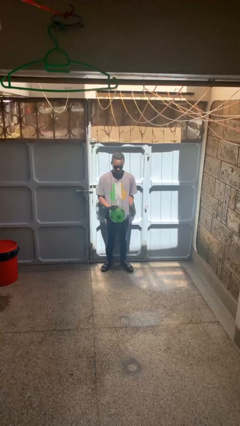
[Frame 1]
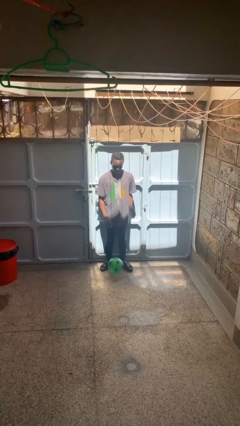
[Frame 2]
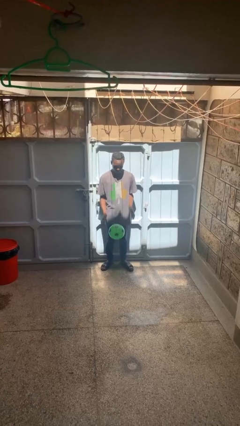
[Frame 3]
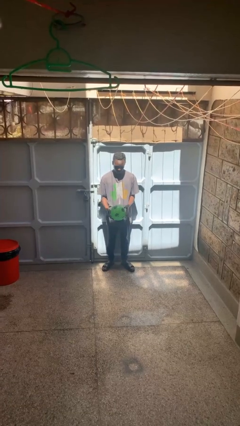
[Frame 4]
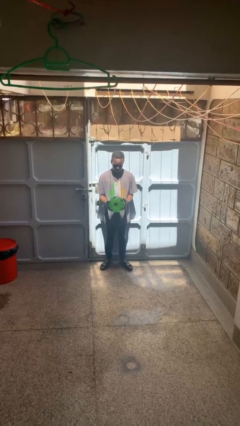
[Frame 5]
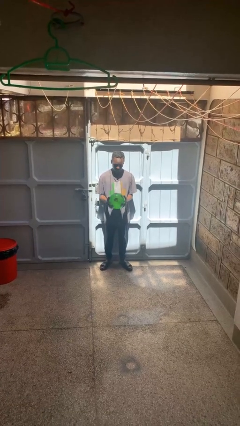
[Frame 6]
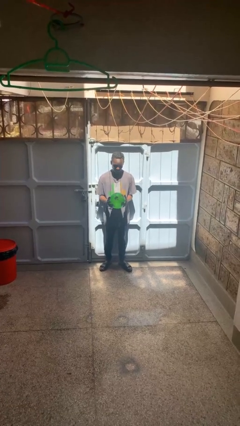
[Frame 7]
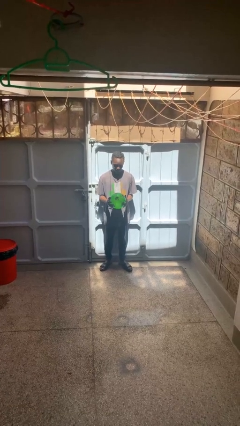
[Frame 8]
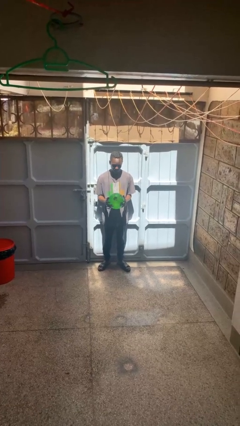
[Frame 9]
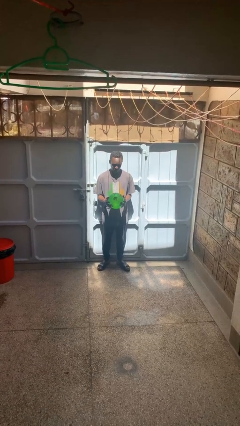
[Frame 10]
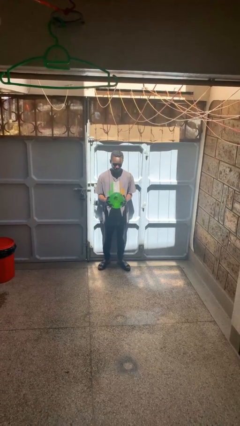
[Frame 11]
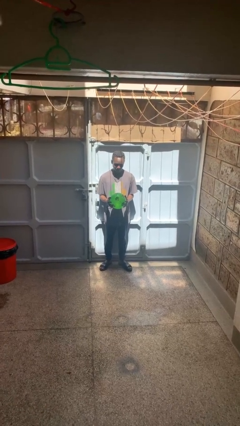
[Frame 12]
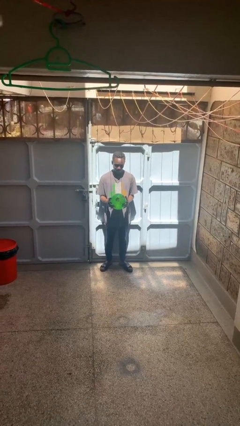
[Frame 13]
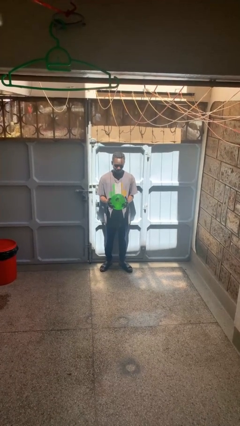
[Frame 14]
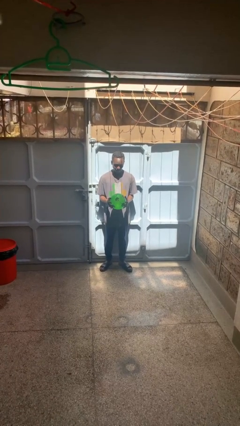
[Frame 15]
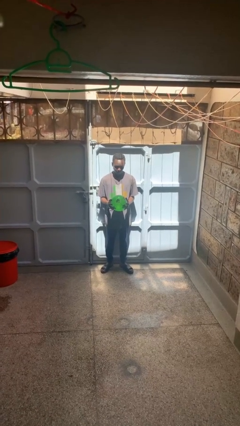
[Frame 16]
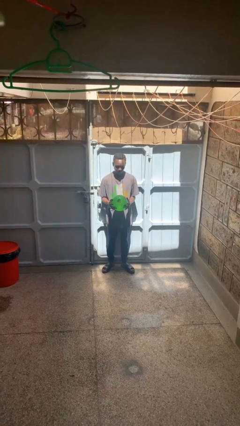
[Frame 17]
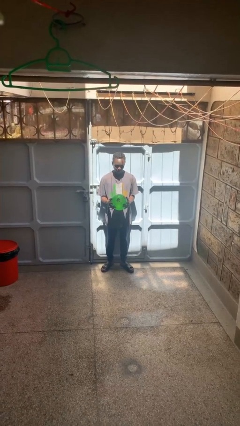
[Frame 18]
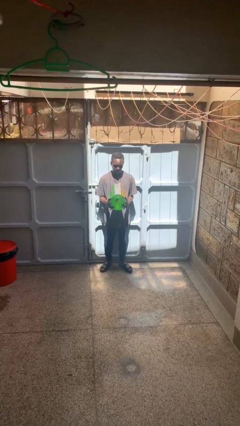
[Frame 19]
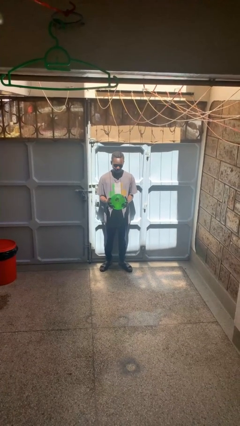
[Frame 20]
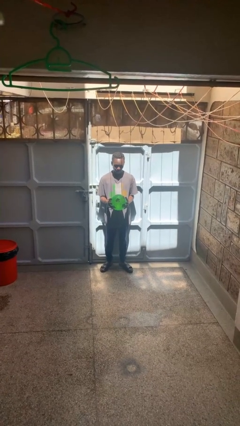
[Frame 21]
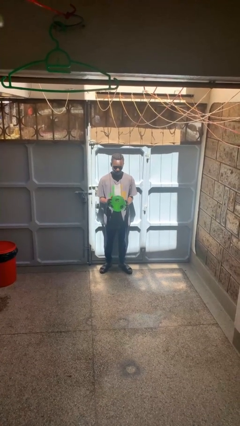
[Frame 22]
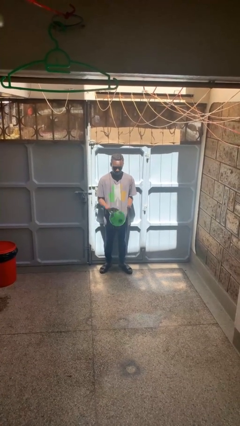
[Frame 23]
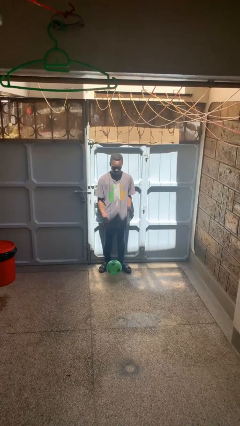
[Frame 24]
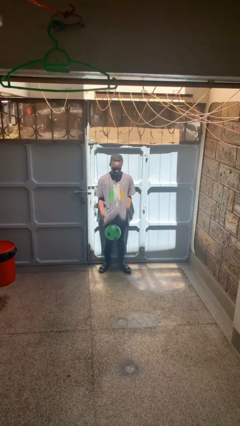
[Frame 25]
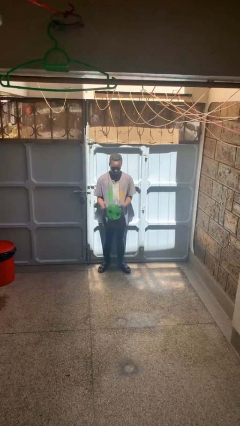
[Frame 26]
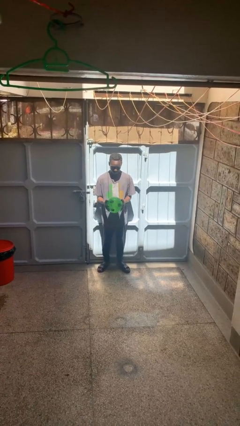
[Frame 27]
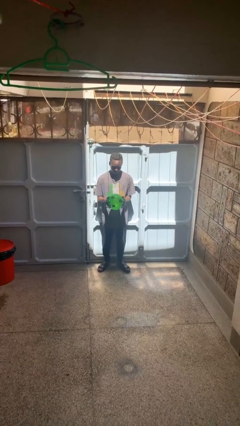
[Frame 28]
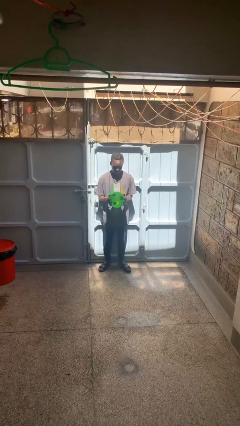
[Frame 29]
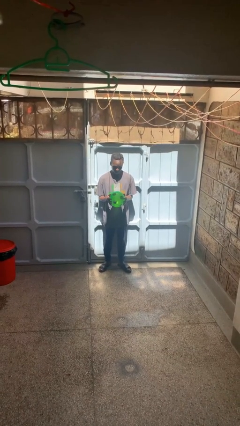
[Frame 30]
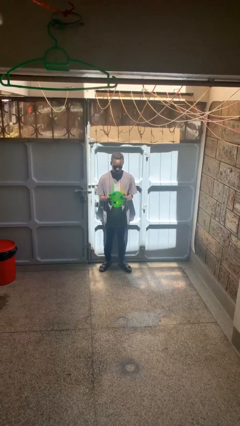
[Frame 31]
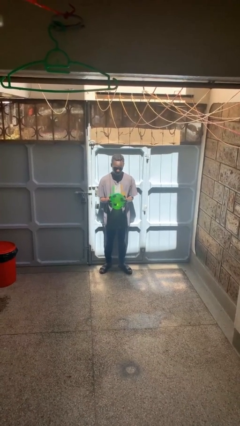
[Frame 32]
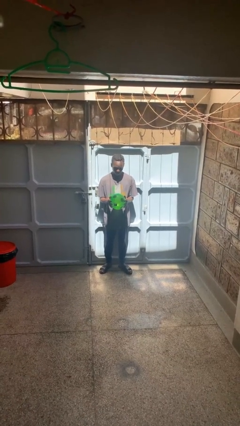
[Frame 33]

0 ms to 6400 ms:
person bounces ball on floor

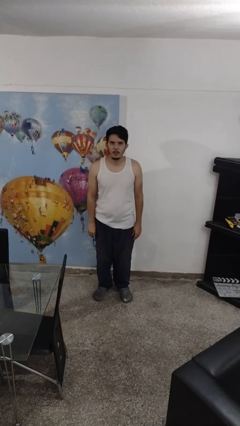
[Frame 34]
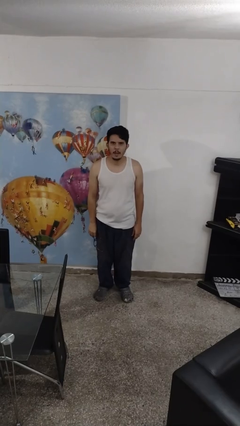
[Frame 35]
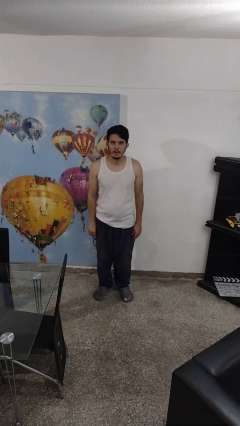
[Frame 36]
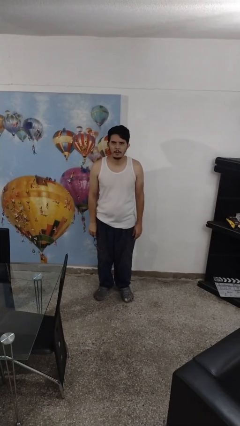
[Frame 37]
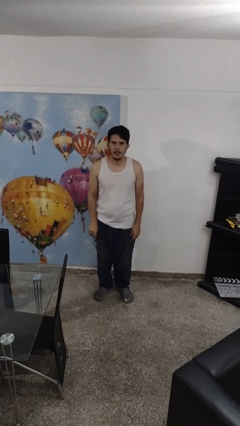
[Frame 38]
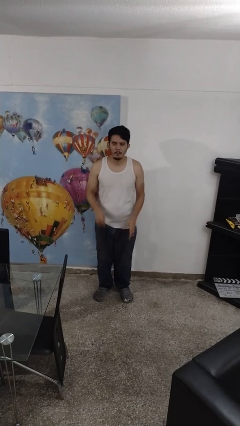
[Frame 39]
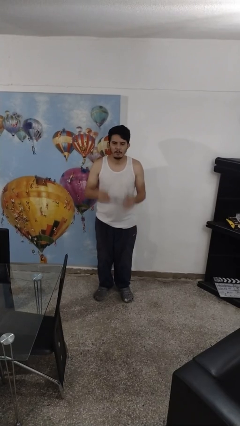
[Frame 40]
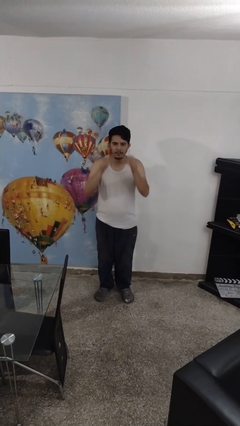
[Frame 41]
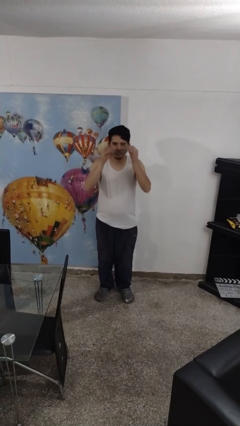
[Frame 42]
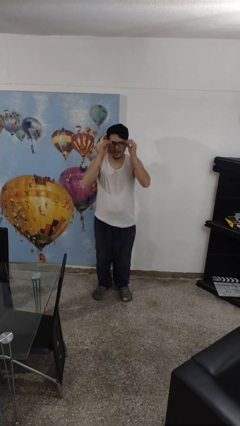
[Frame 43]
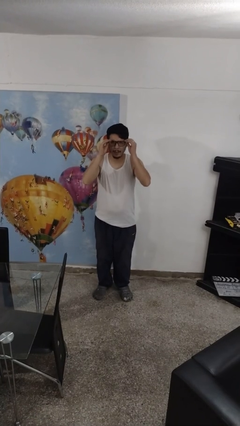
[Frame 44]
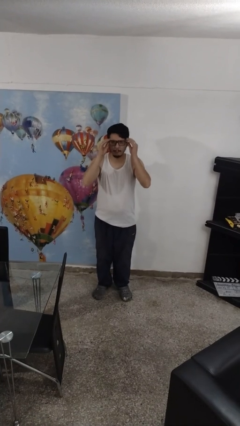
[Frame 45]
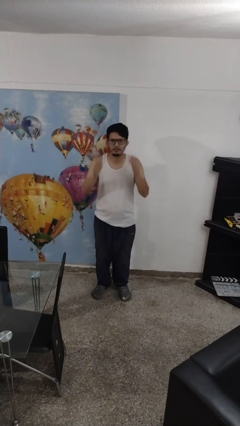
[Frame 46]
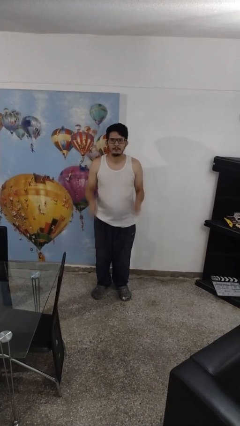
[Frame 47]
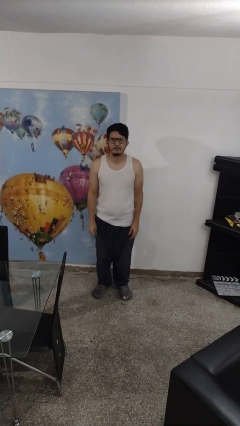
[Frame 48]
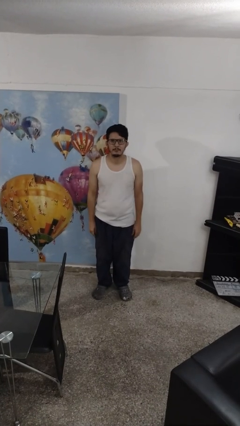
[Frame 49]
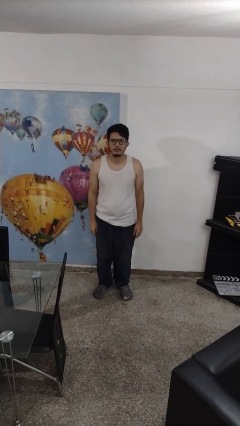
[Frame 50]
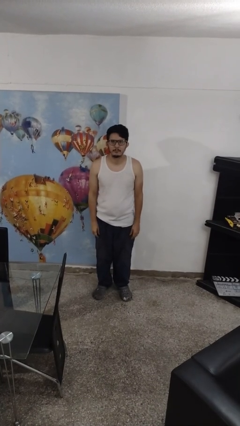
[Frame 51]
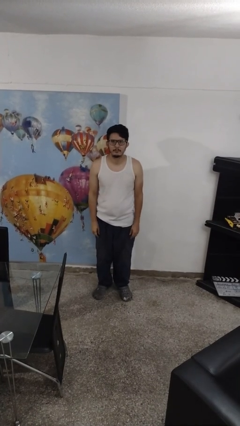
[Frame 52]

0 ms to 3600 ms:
person puts on glasses

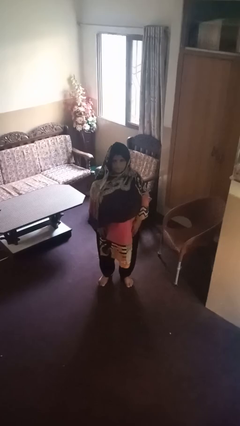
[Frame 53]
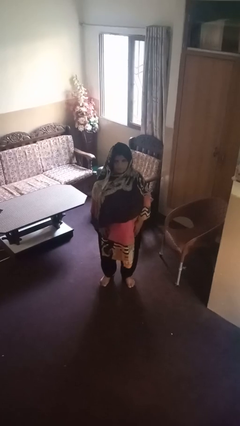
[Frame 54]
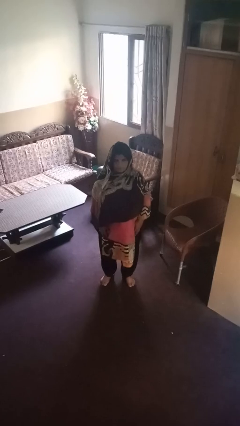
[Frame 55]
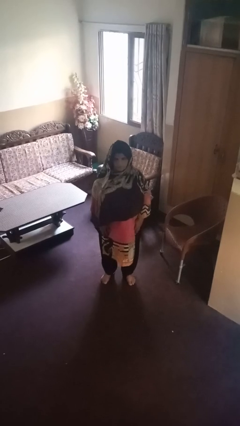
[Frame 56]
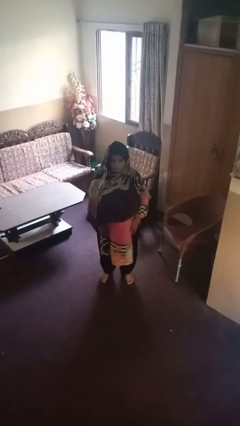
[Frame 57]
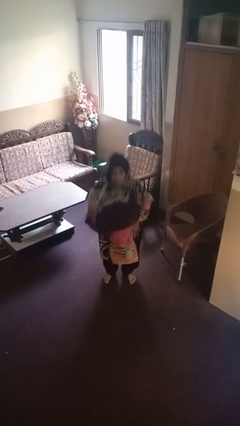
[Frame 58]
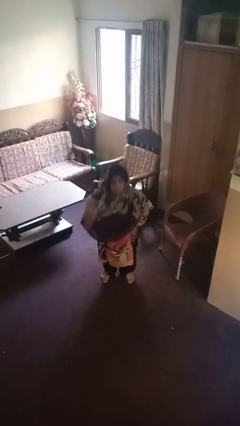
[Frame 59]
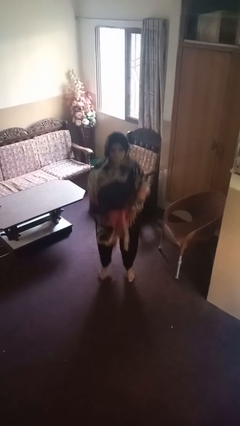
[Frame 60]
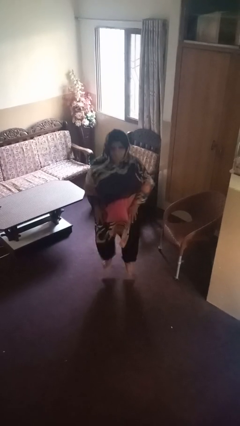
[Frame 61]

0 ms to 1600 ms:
person jumps

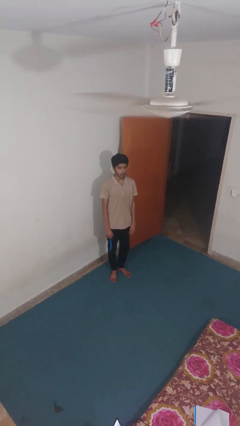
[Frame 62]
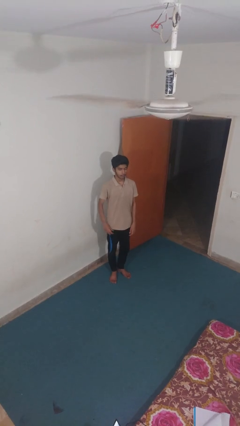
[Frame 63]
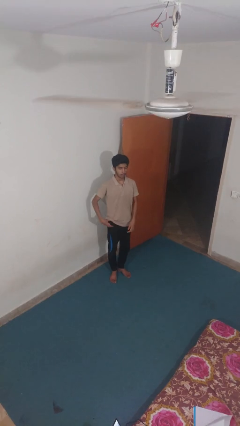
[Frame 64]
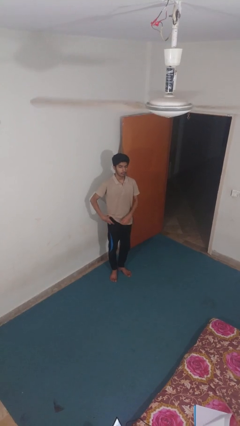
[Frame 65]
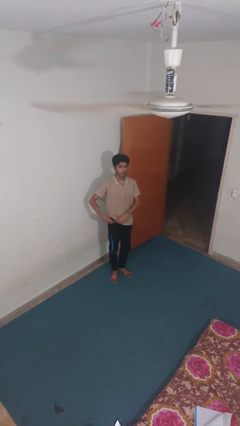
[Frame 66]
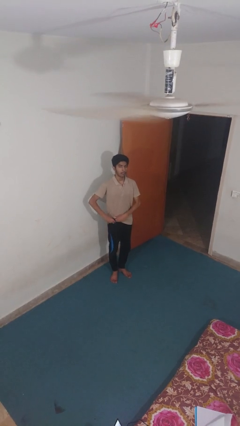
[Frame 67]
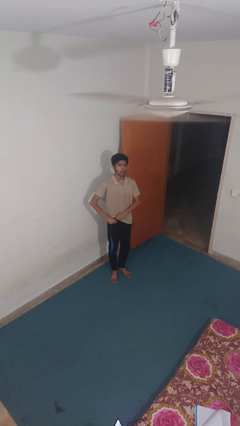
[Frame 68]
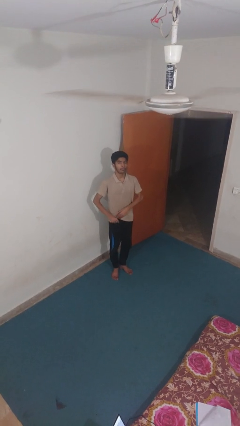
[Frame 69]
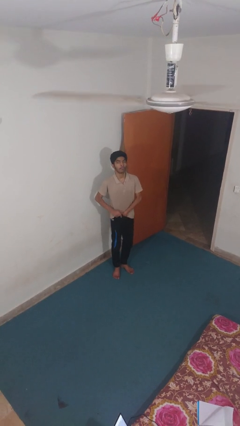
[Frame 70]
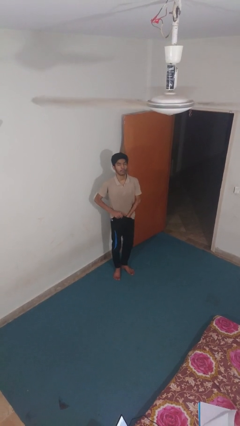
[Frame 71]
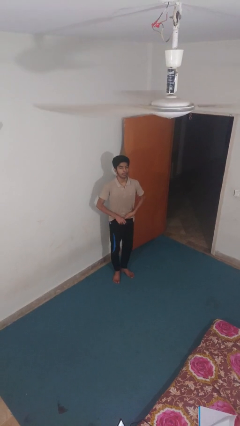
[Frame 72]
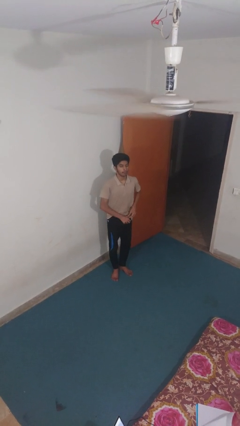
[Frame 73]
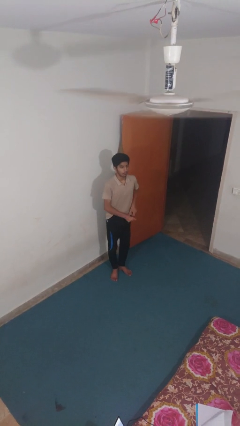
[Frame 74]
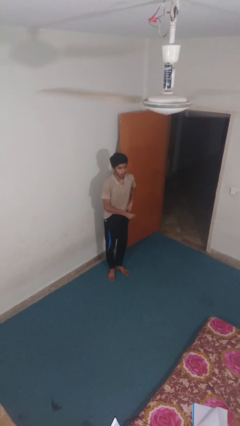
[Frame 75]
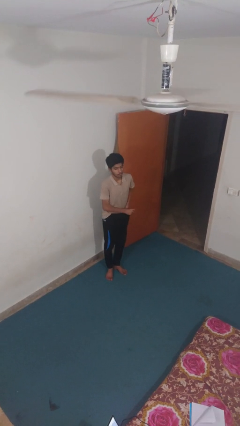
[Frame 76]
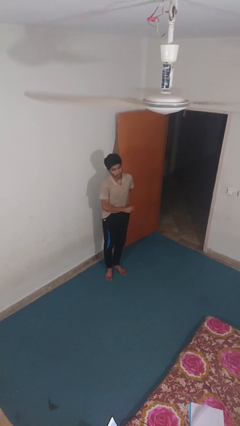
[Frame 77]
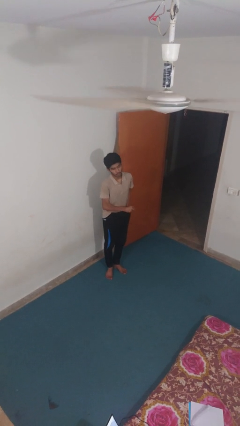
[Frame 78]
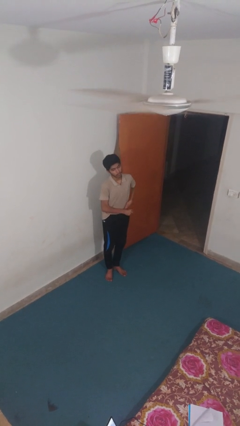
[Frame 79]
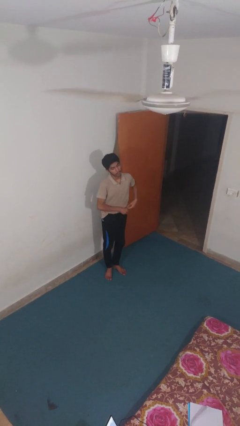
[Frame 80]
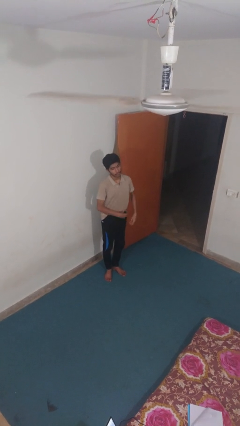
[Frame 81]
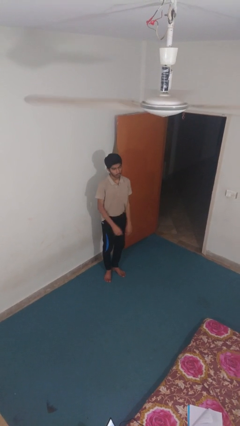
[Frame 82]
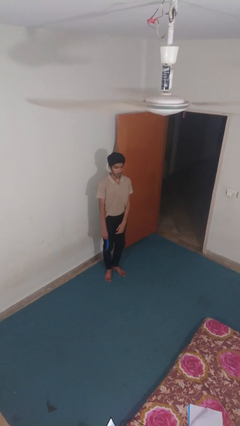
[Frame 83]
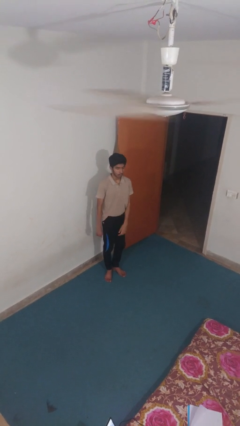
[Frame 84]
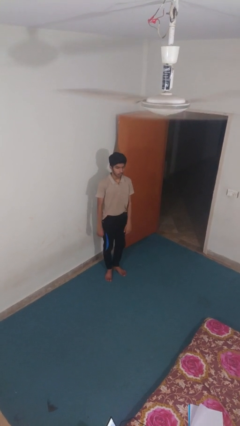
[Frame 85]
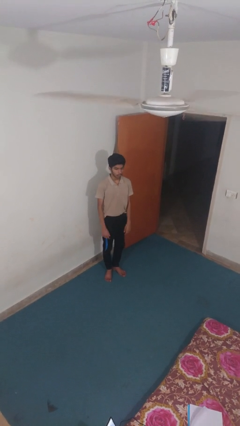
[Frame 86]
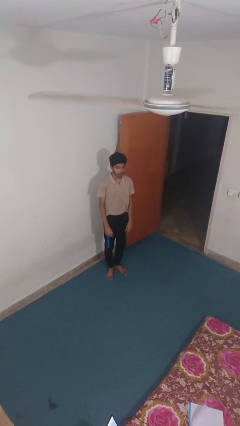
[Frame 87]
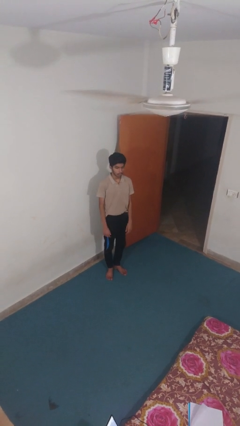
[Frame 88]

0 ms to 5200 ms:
person tucks in shirt

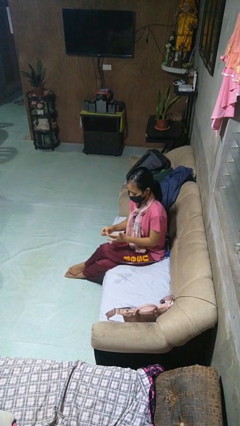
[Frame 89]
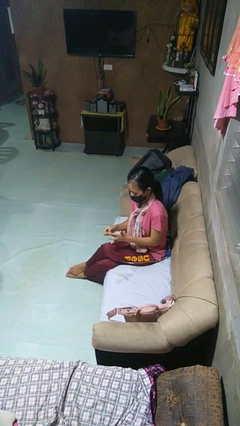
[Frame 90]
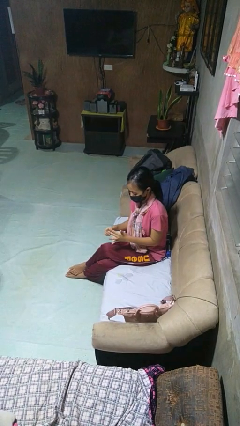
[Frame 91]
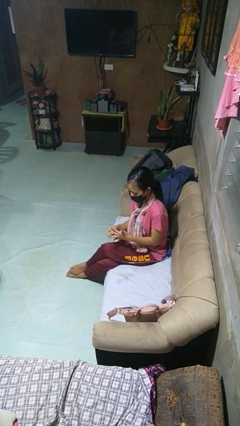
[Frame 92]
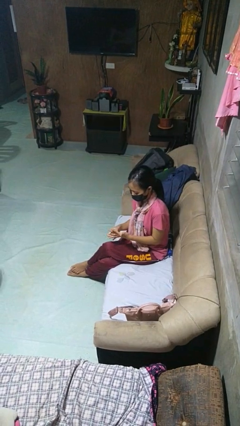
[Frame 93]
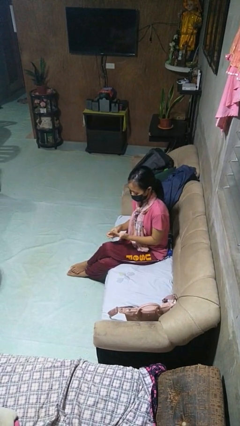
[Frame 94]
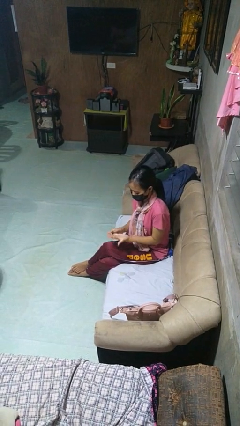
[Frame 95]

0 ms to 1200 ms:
person puts on ring
